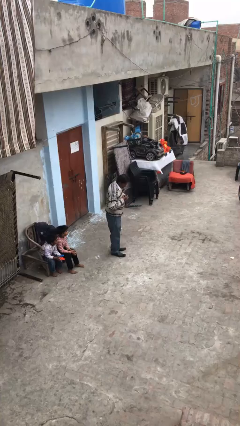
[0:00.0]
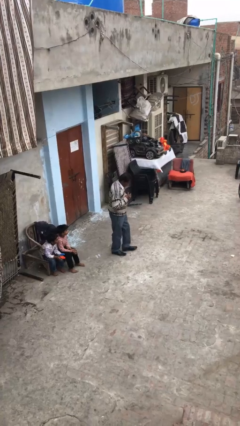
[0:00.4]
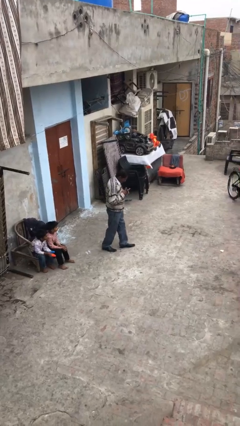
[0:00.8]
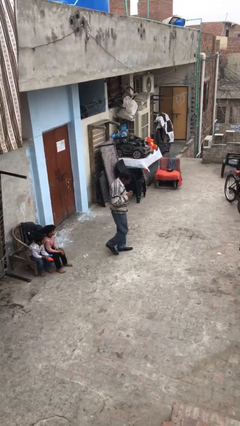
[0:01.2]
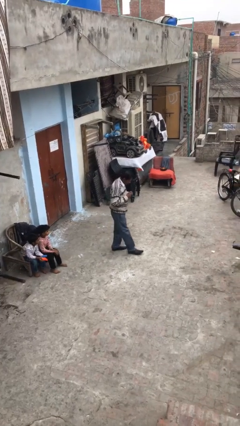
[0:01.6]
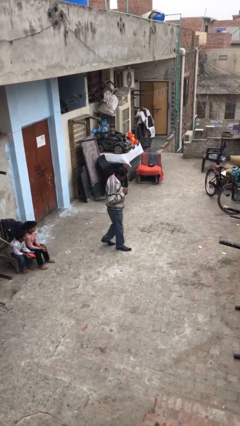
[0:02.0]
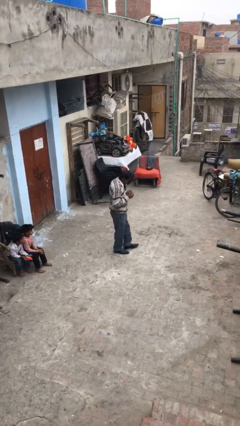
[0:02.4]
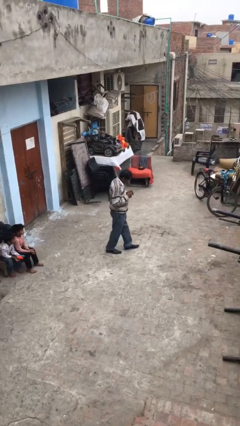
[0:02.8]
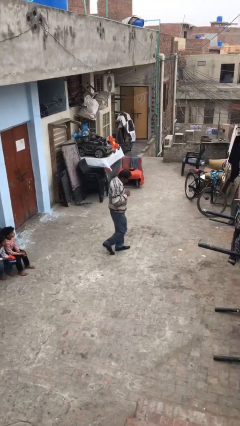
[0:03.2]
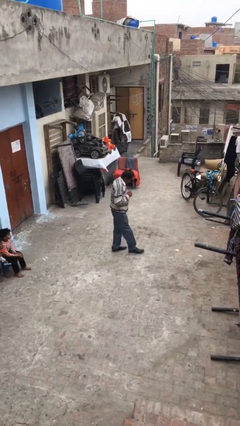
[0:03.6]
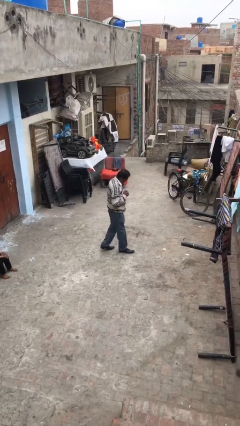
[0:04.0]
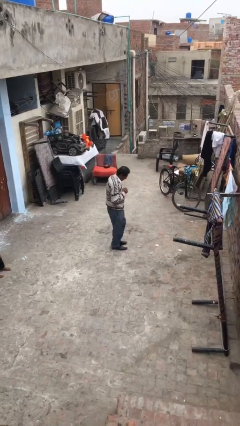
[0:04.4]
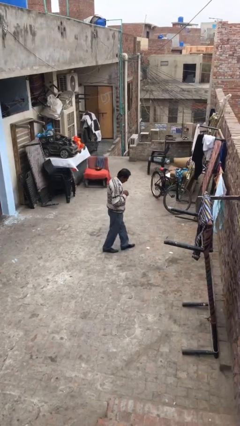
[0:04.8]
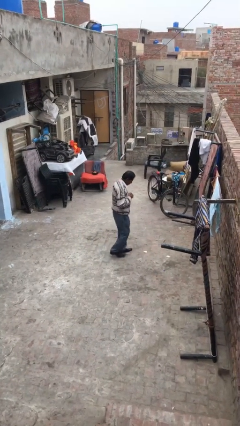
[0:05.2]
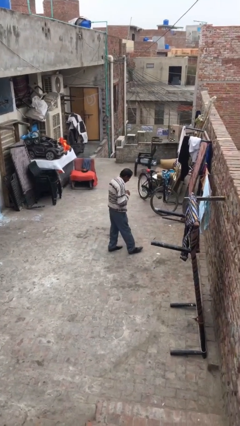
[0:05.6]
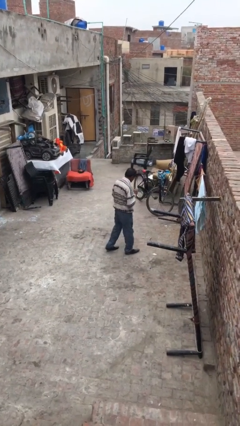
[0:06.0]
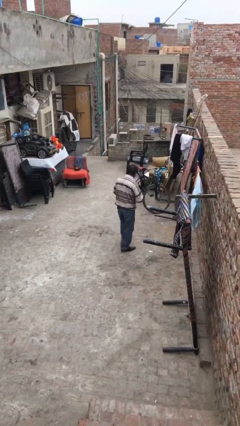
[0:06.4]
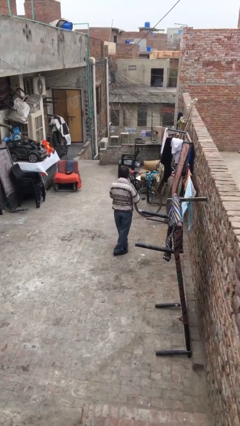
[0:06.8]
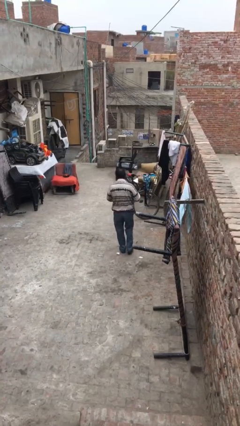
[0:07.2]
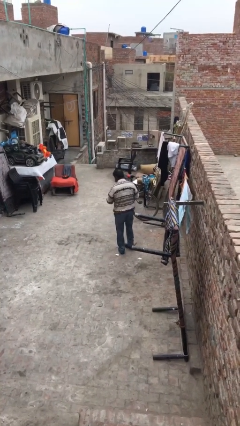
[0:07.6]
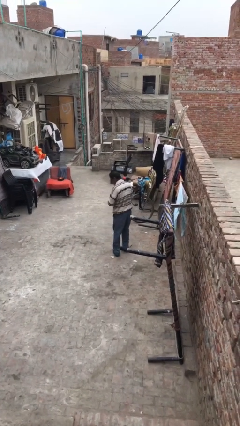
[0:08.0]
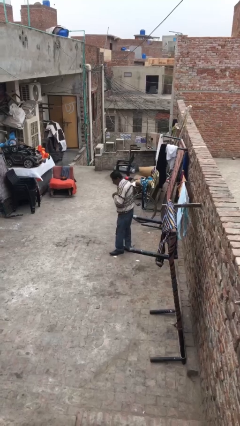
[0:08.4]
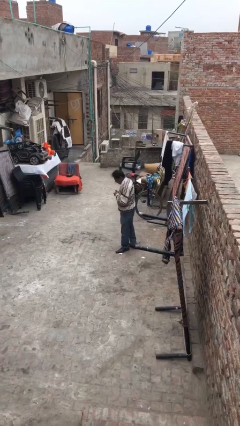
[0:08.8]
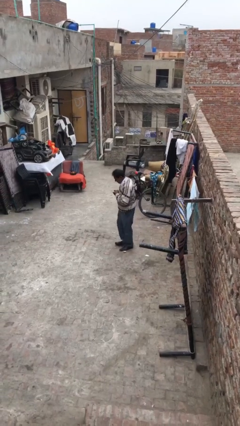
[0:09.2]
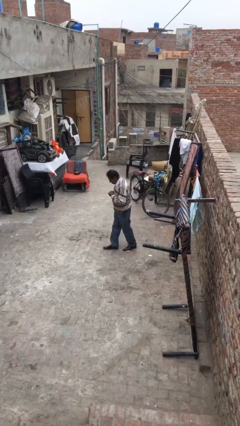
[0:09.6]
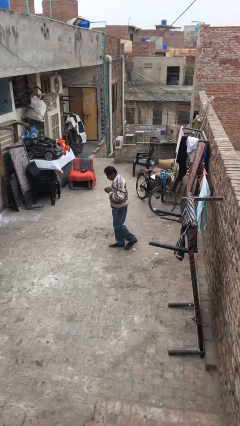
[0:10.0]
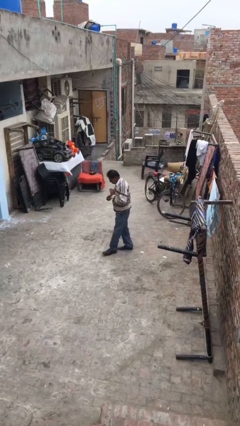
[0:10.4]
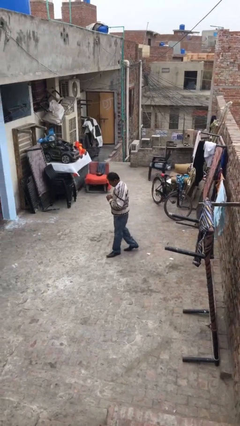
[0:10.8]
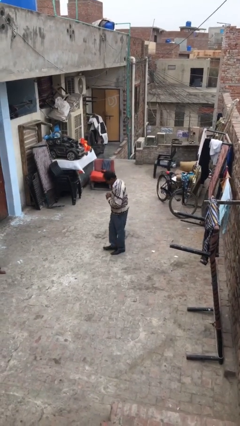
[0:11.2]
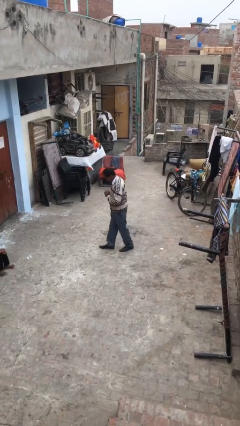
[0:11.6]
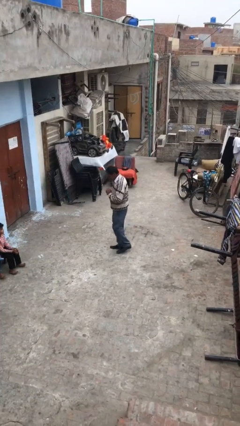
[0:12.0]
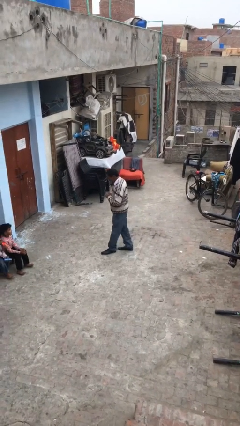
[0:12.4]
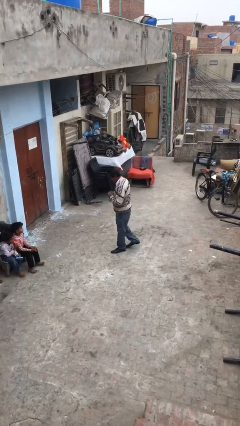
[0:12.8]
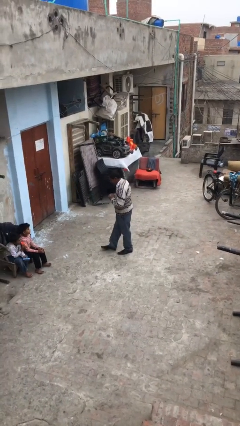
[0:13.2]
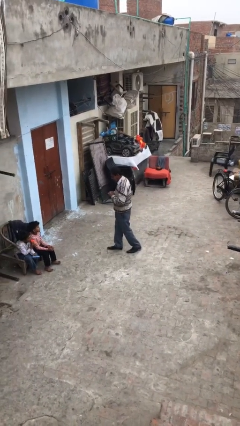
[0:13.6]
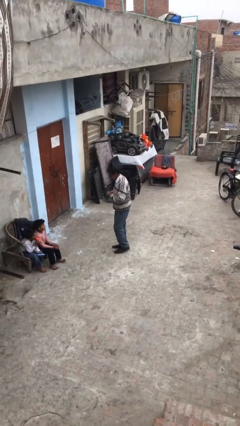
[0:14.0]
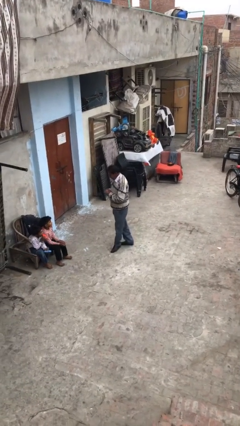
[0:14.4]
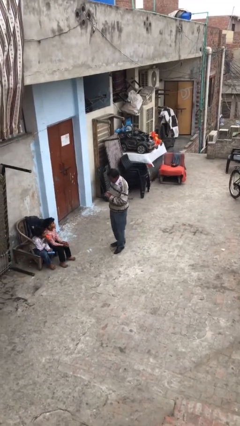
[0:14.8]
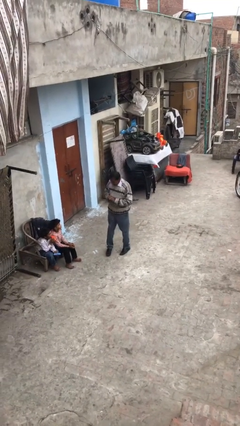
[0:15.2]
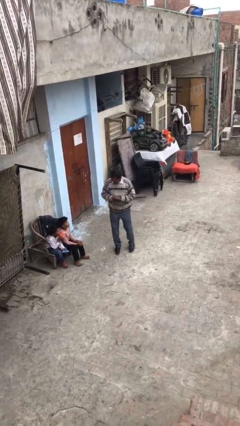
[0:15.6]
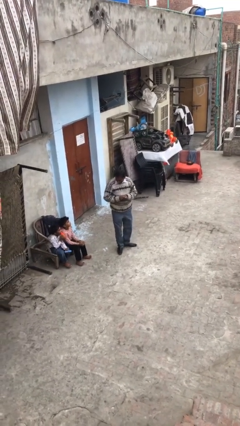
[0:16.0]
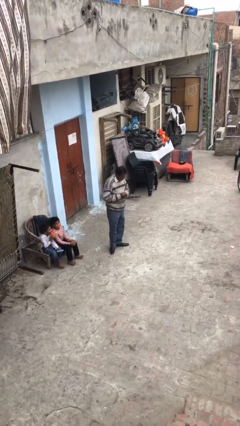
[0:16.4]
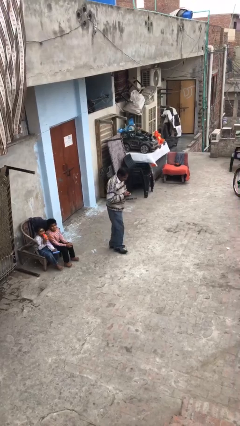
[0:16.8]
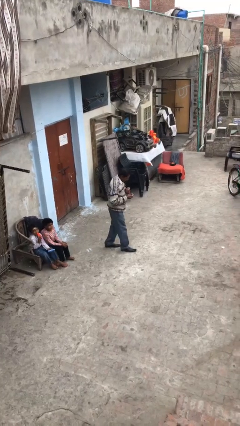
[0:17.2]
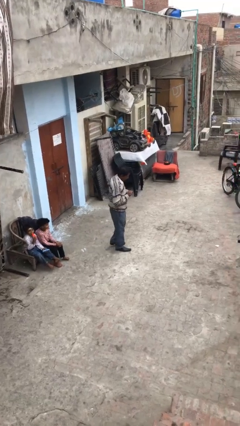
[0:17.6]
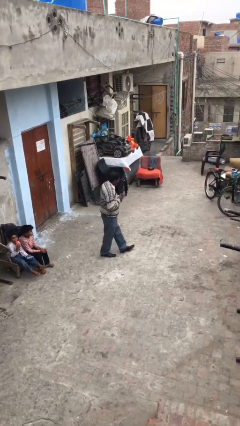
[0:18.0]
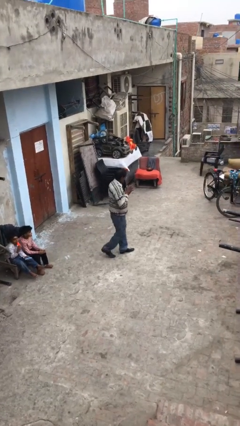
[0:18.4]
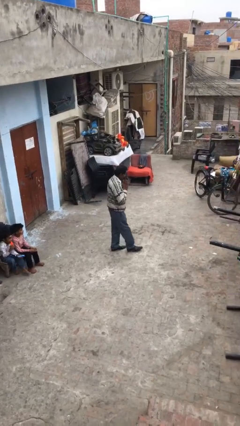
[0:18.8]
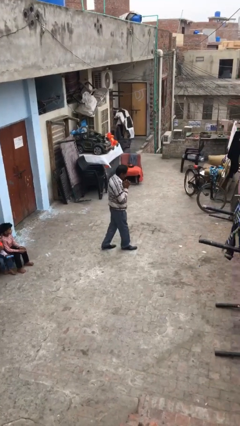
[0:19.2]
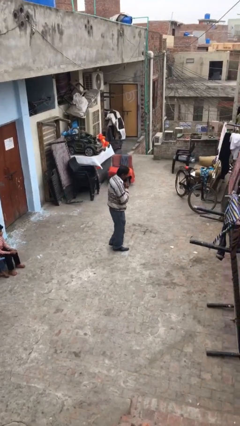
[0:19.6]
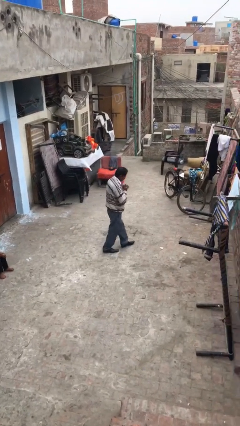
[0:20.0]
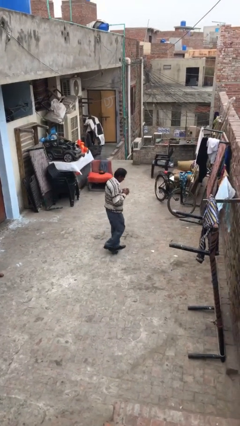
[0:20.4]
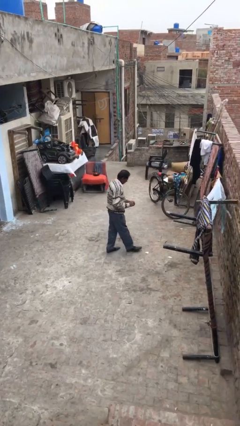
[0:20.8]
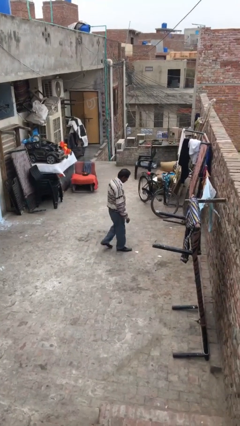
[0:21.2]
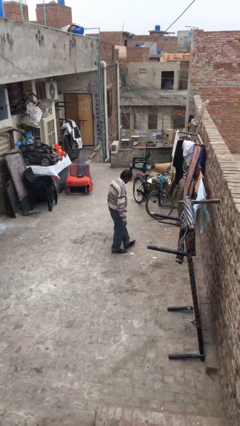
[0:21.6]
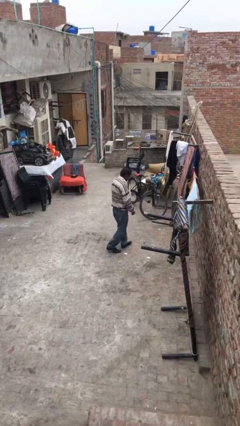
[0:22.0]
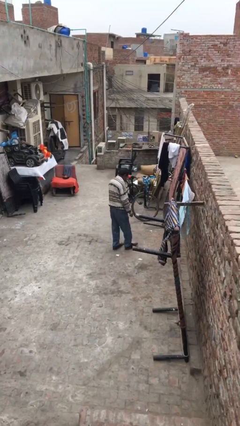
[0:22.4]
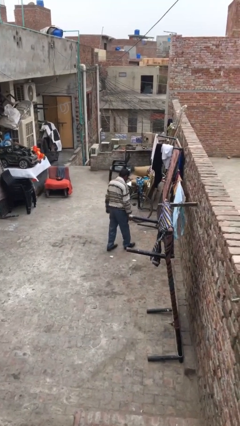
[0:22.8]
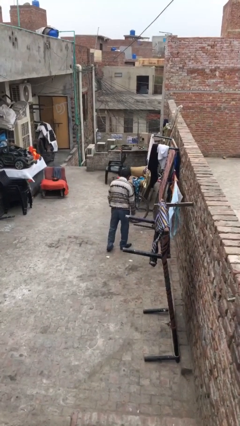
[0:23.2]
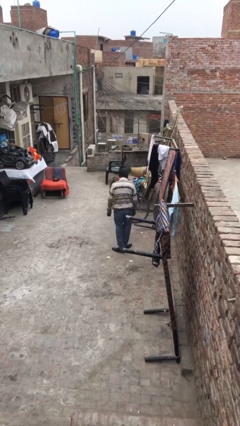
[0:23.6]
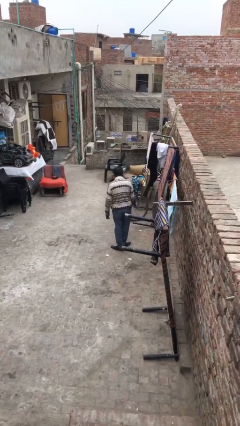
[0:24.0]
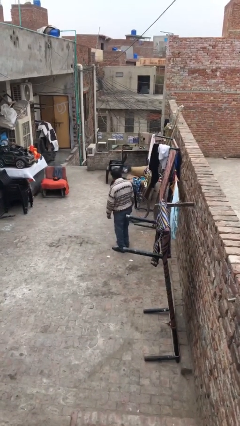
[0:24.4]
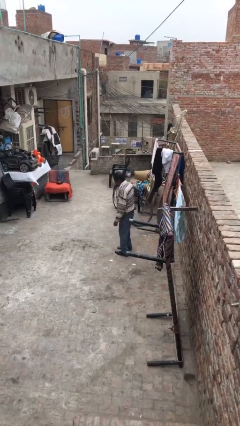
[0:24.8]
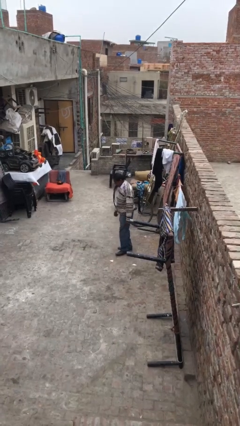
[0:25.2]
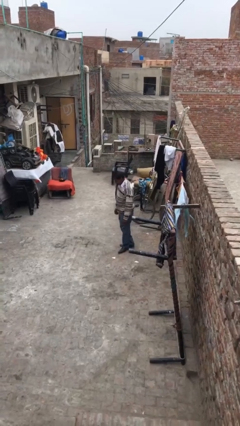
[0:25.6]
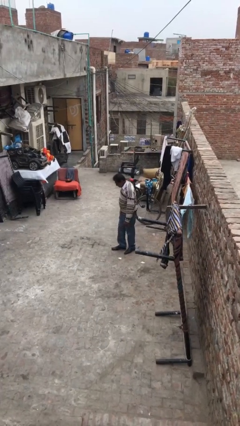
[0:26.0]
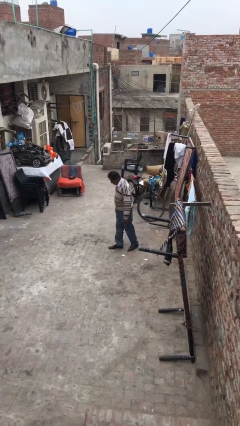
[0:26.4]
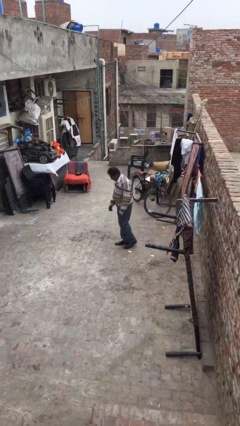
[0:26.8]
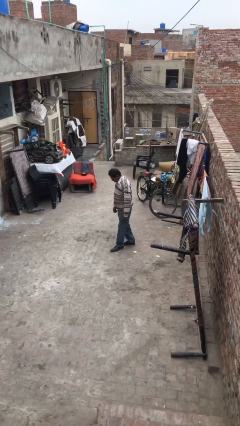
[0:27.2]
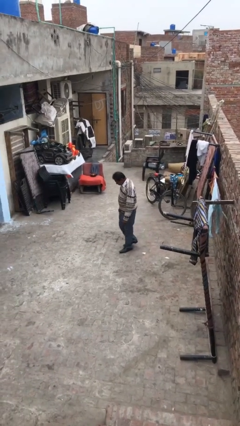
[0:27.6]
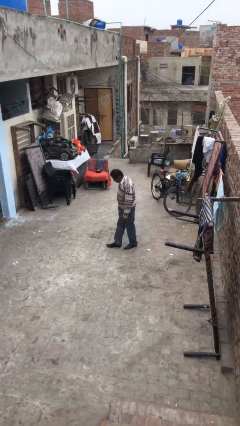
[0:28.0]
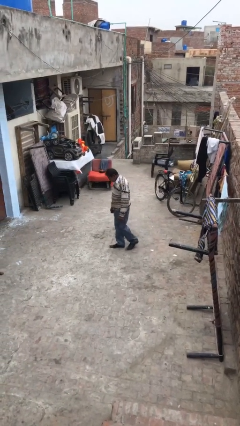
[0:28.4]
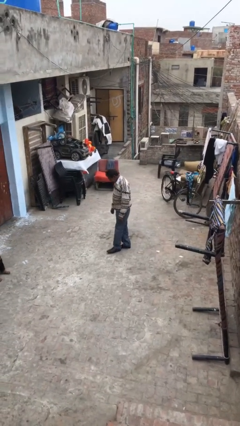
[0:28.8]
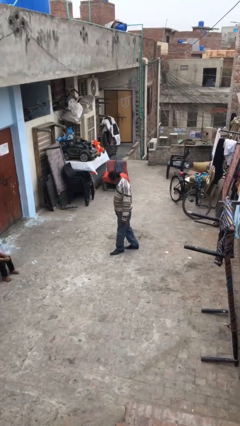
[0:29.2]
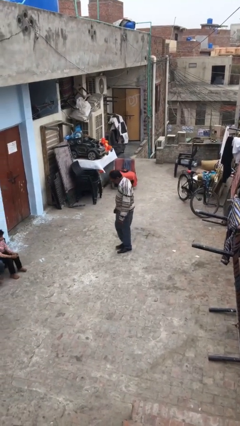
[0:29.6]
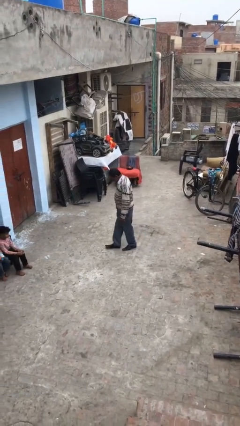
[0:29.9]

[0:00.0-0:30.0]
person walks

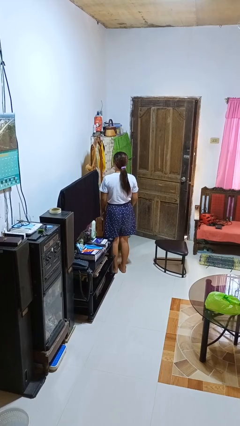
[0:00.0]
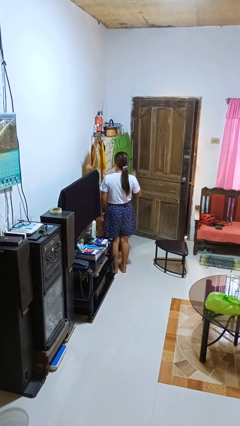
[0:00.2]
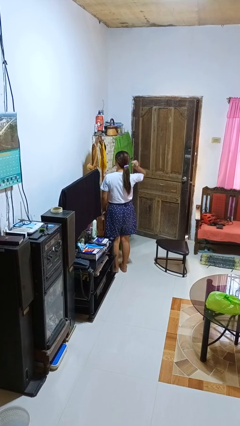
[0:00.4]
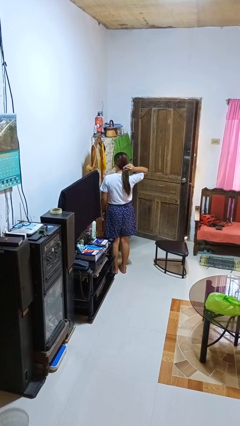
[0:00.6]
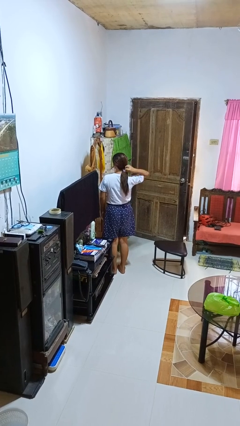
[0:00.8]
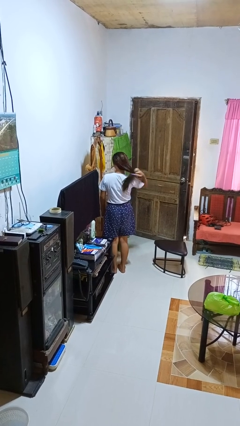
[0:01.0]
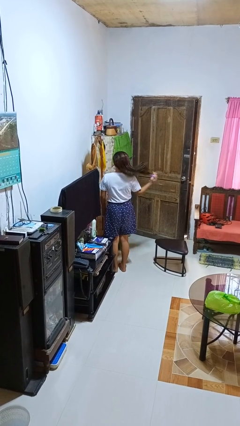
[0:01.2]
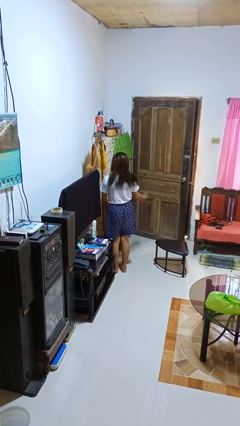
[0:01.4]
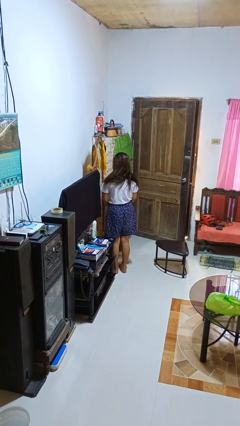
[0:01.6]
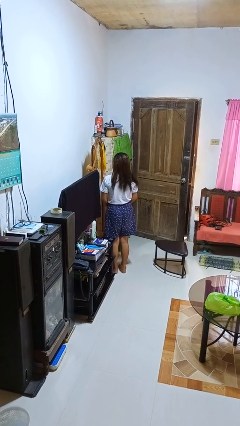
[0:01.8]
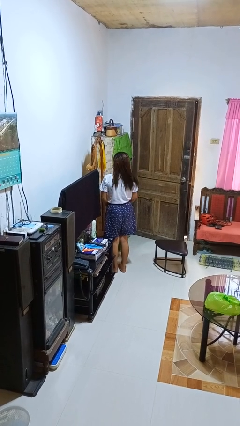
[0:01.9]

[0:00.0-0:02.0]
person takes off hairtie

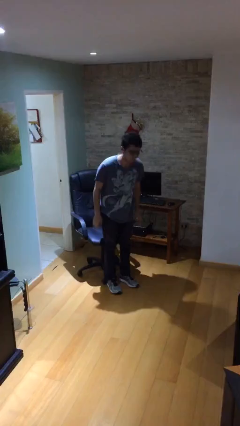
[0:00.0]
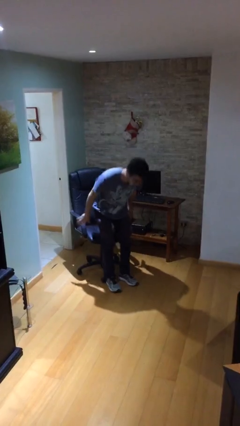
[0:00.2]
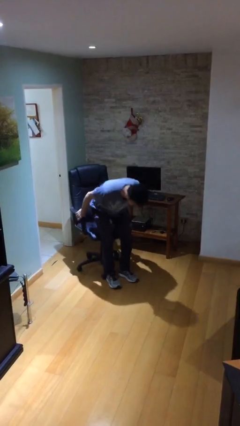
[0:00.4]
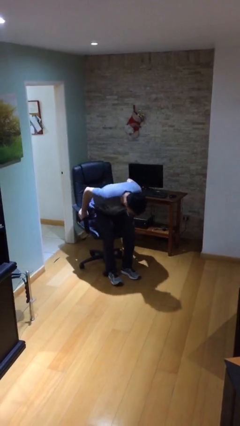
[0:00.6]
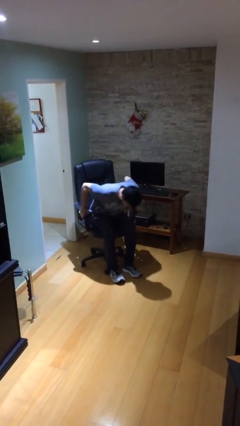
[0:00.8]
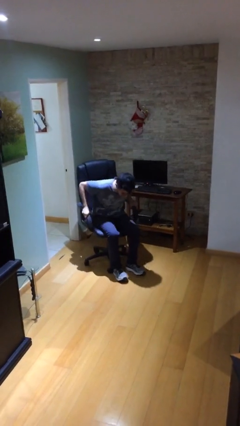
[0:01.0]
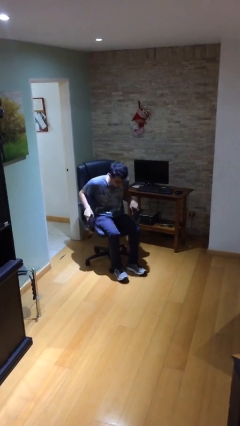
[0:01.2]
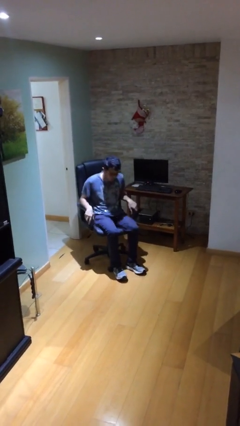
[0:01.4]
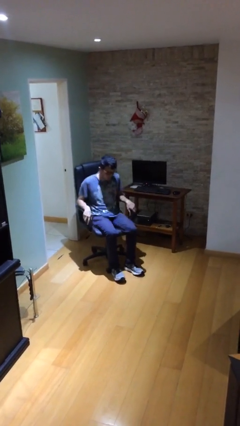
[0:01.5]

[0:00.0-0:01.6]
person sits down
